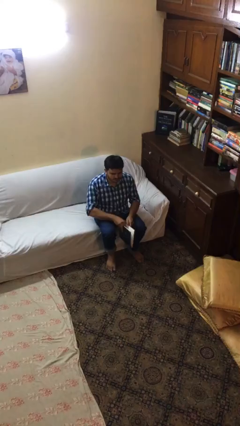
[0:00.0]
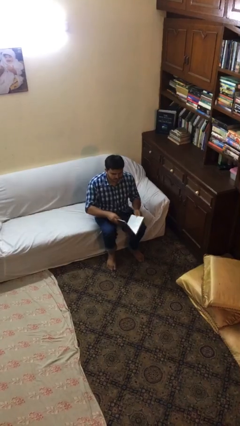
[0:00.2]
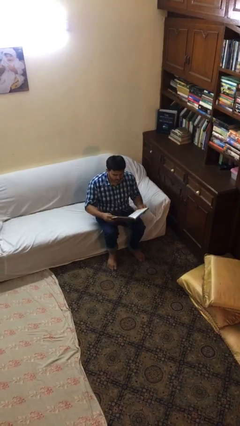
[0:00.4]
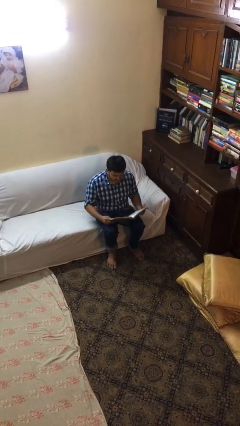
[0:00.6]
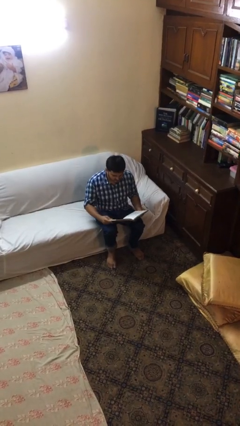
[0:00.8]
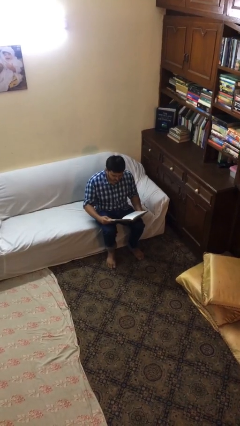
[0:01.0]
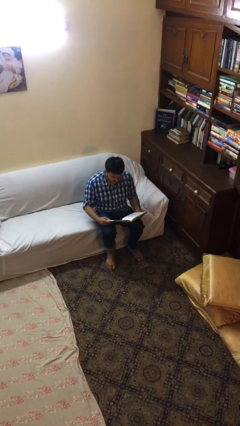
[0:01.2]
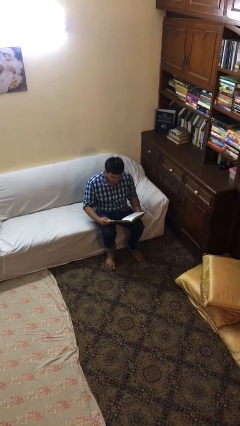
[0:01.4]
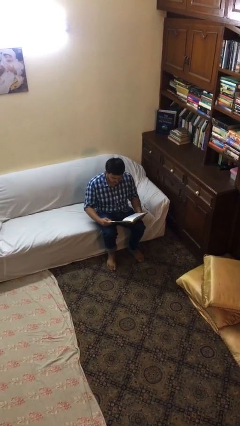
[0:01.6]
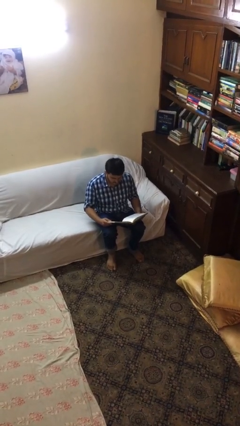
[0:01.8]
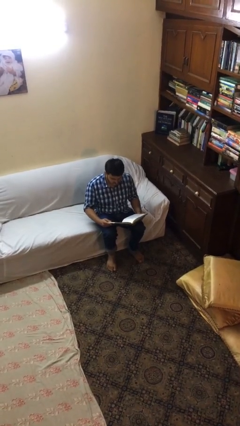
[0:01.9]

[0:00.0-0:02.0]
person reads document

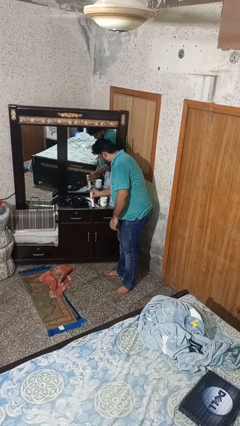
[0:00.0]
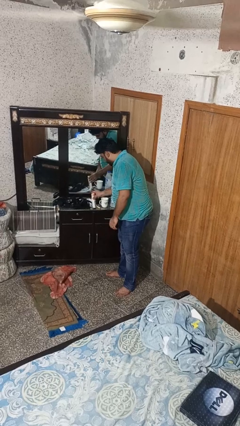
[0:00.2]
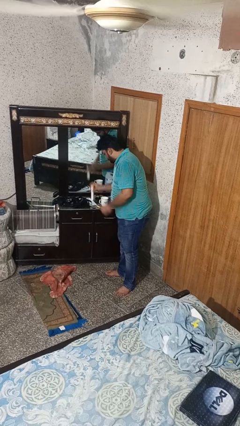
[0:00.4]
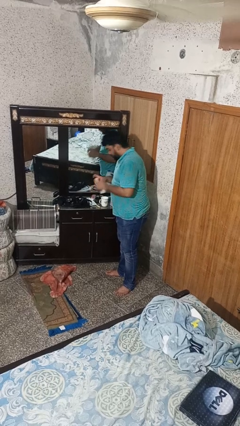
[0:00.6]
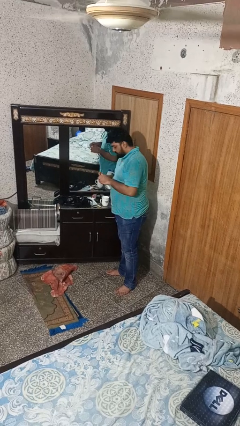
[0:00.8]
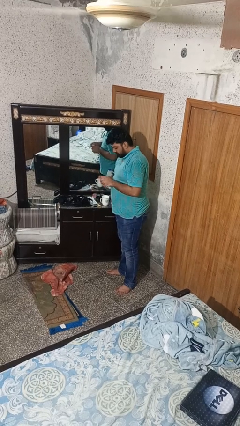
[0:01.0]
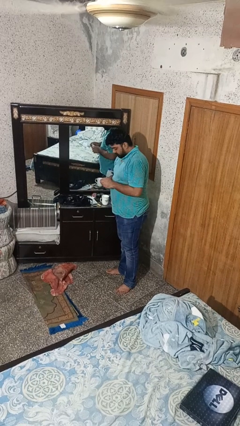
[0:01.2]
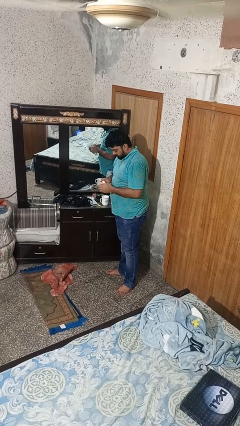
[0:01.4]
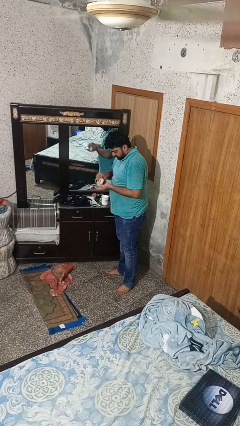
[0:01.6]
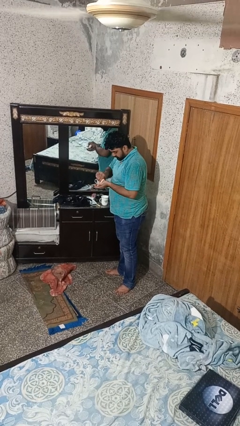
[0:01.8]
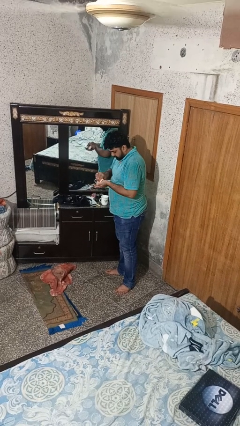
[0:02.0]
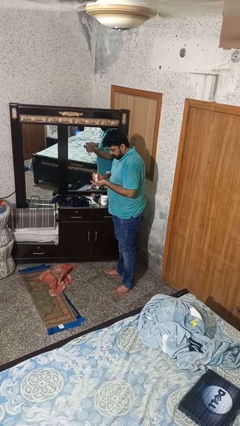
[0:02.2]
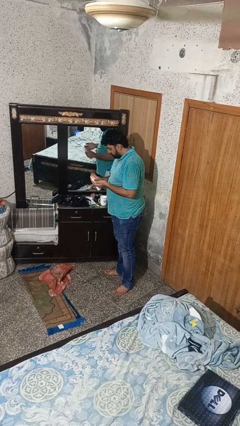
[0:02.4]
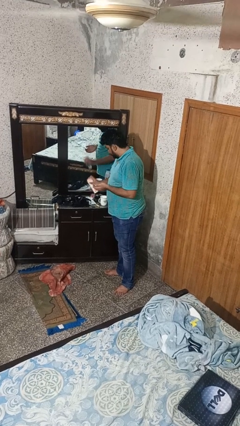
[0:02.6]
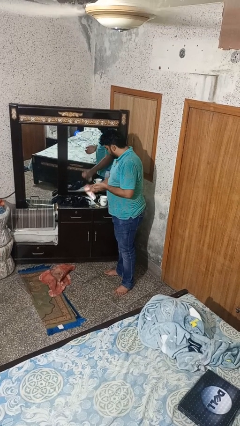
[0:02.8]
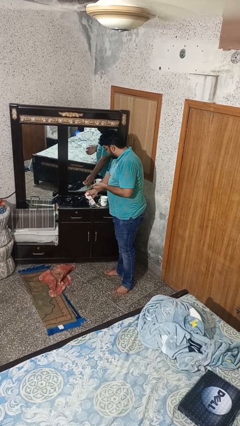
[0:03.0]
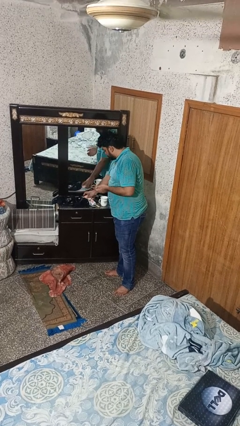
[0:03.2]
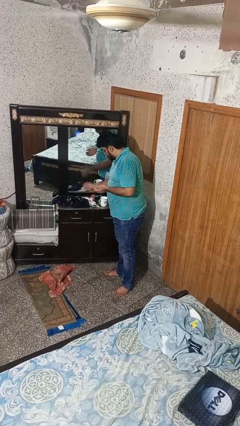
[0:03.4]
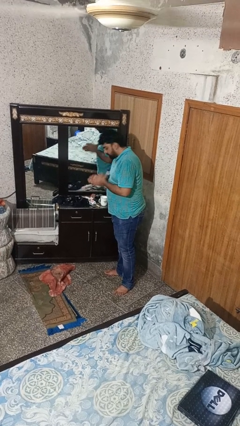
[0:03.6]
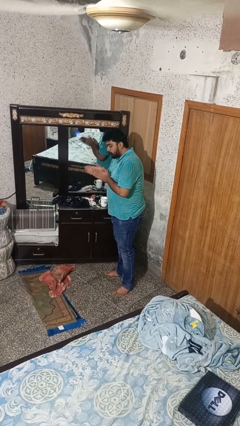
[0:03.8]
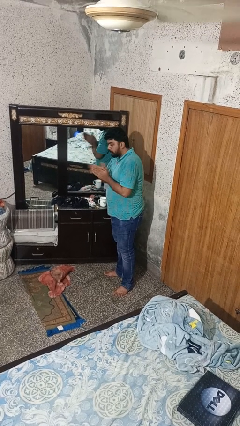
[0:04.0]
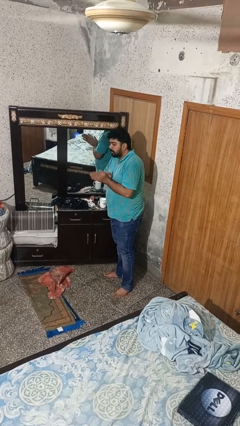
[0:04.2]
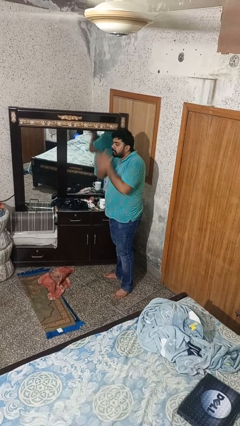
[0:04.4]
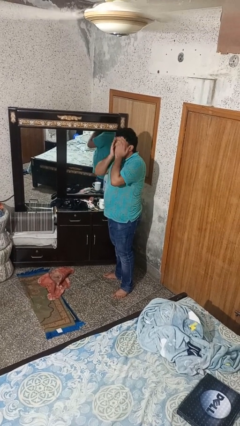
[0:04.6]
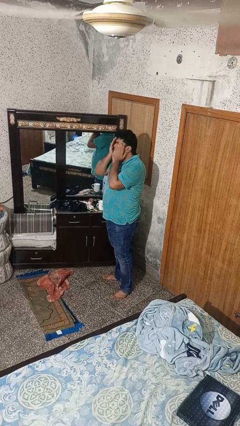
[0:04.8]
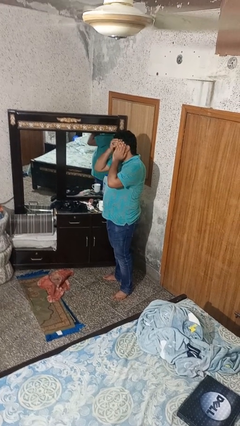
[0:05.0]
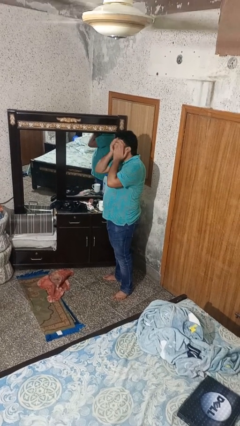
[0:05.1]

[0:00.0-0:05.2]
person applies facial moisturizer

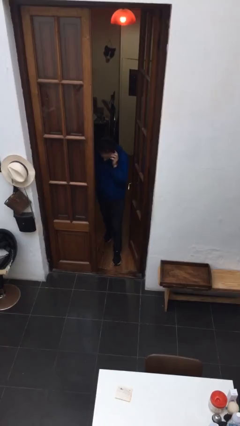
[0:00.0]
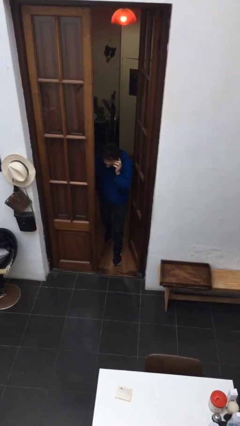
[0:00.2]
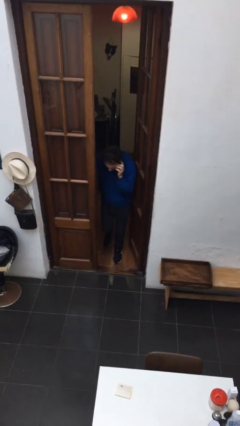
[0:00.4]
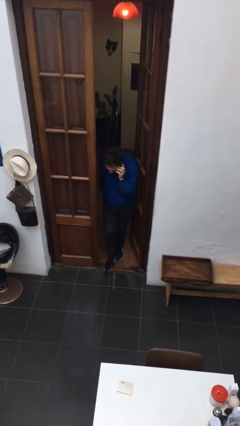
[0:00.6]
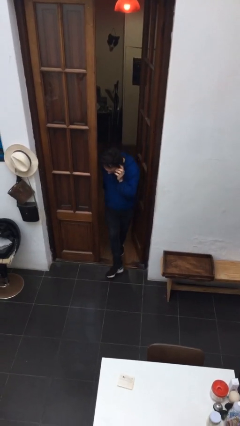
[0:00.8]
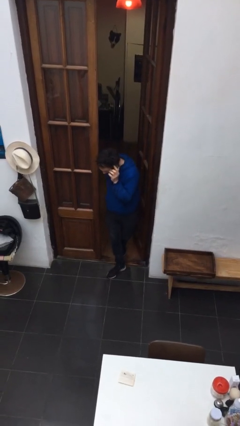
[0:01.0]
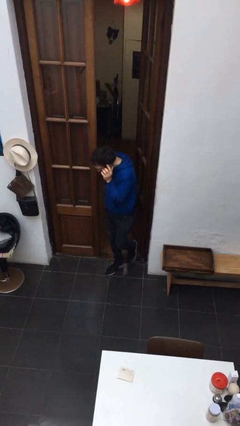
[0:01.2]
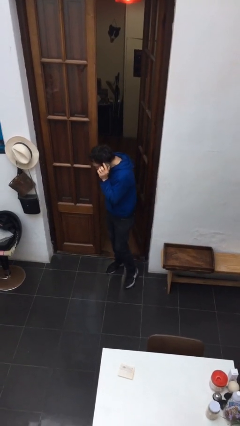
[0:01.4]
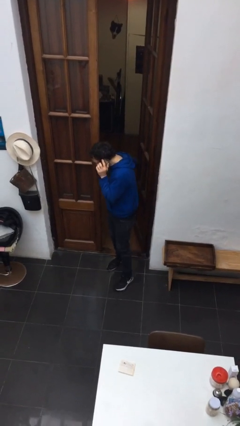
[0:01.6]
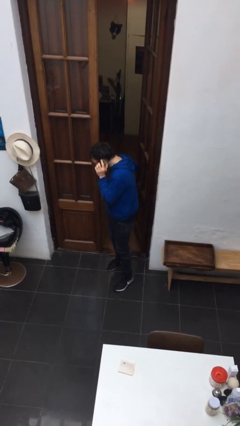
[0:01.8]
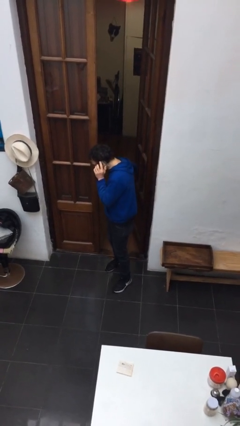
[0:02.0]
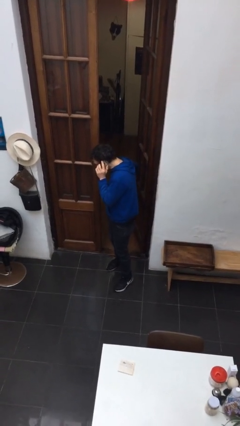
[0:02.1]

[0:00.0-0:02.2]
person enters scene through structure

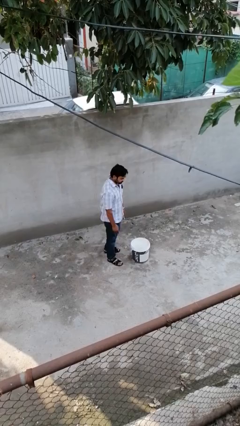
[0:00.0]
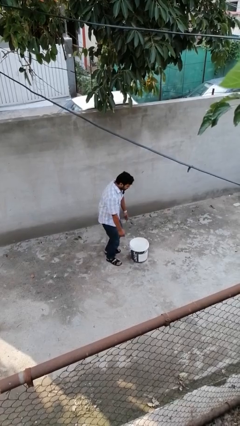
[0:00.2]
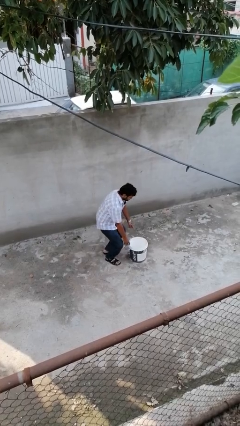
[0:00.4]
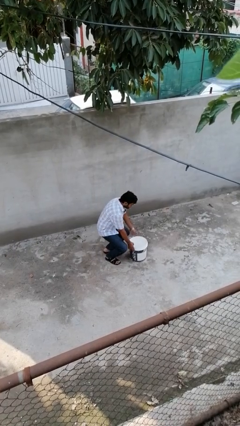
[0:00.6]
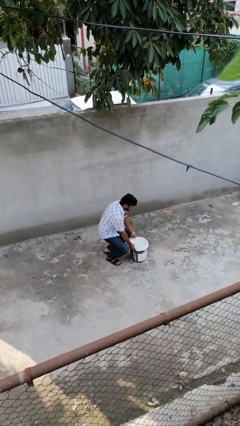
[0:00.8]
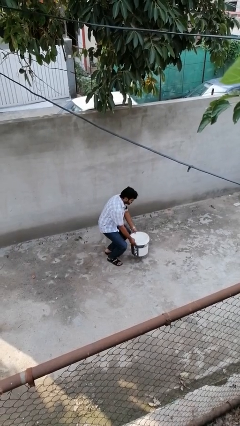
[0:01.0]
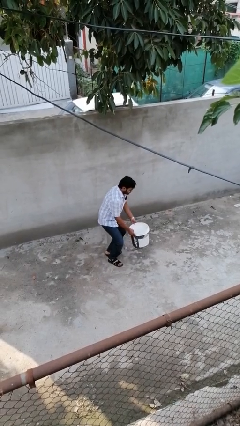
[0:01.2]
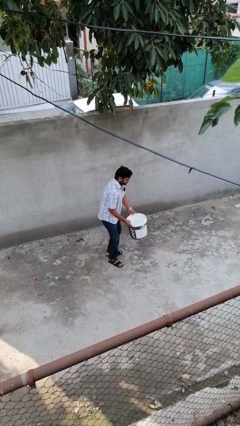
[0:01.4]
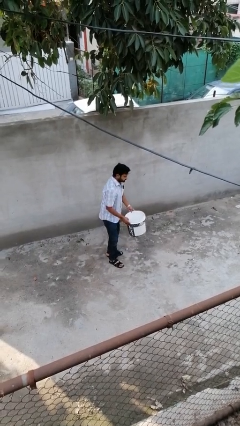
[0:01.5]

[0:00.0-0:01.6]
person picks up object from floor

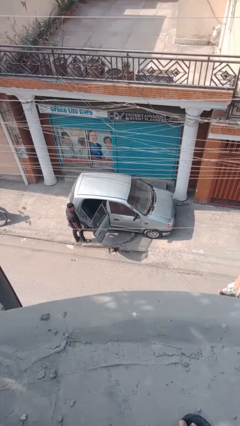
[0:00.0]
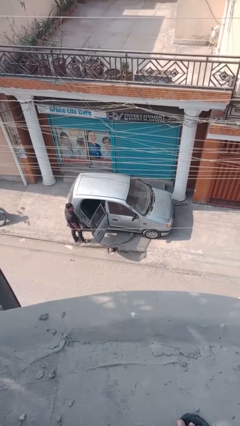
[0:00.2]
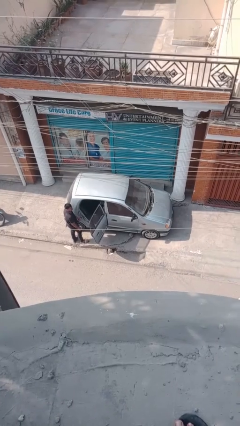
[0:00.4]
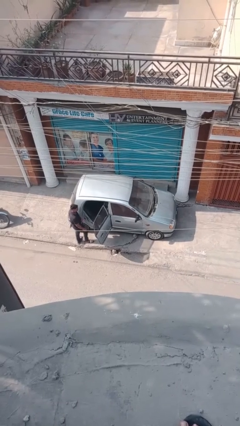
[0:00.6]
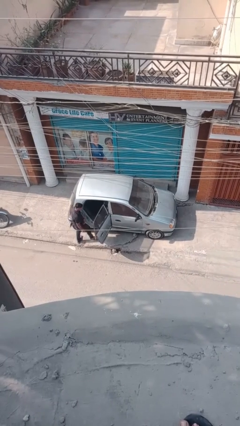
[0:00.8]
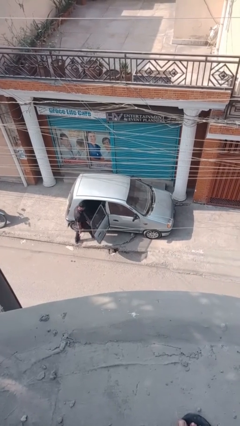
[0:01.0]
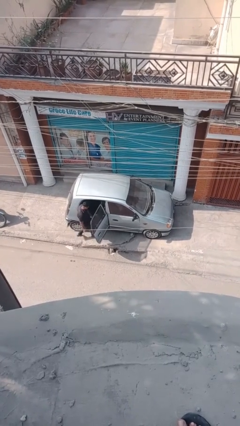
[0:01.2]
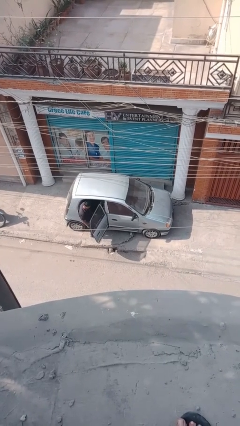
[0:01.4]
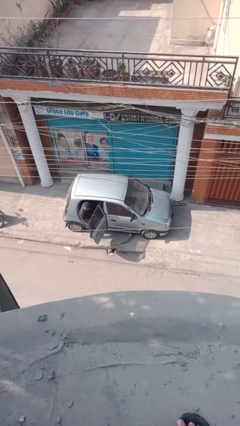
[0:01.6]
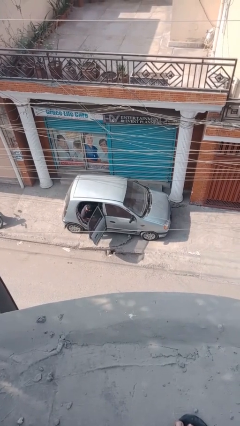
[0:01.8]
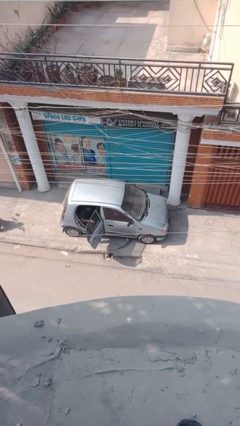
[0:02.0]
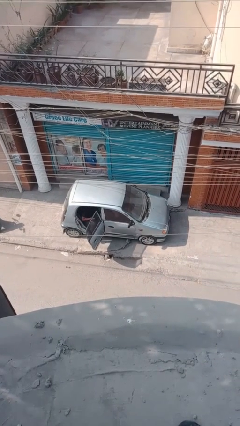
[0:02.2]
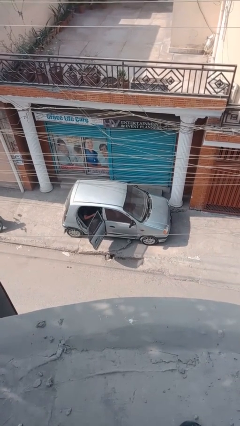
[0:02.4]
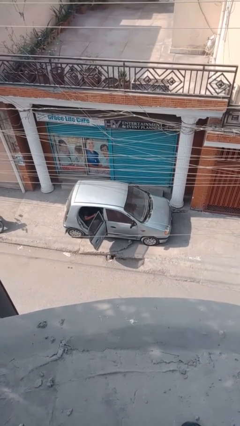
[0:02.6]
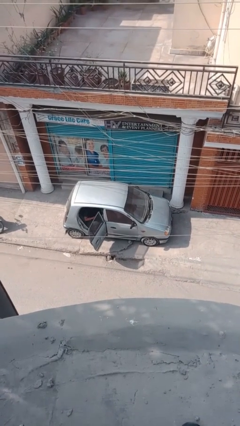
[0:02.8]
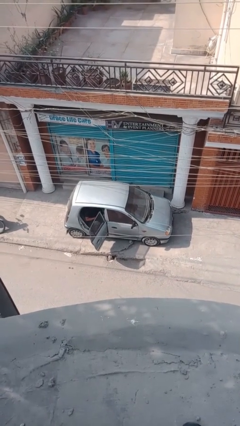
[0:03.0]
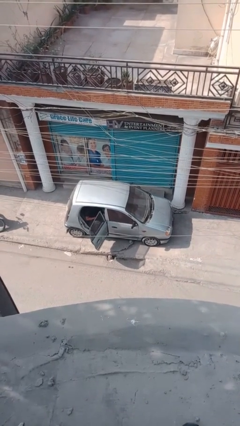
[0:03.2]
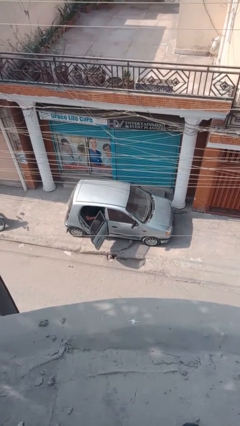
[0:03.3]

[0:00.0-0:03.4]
person enters car

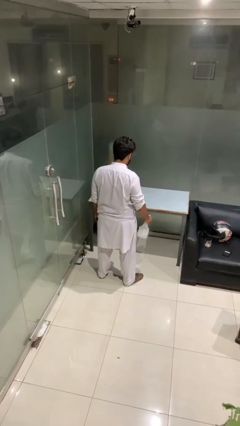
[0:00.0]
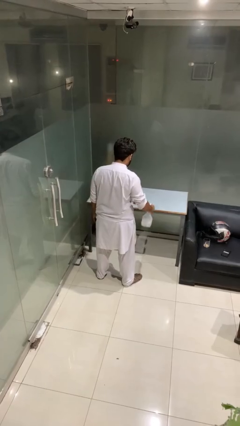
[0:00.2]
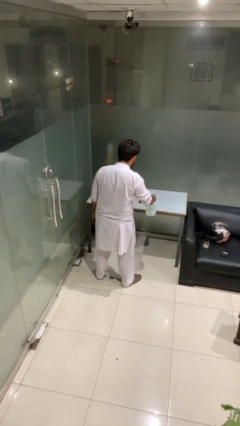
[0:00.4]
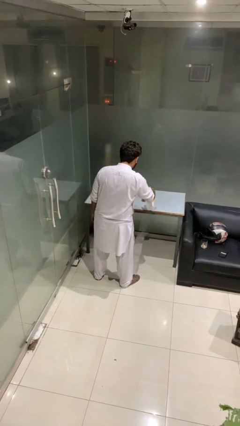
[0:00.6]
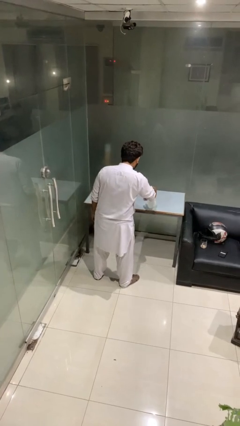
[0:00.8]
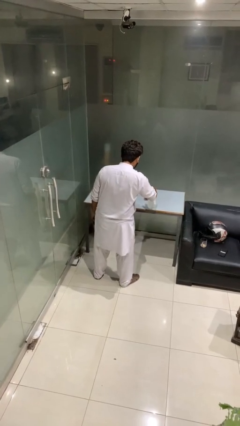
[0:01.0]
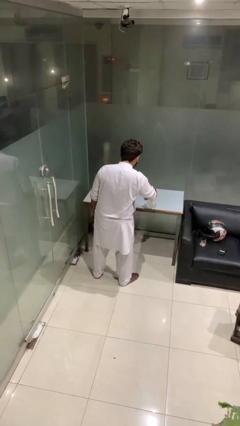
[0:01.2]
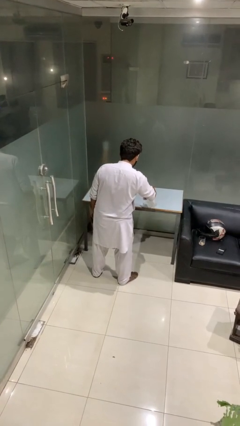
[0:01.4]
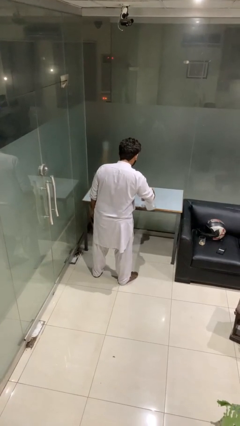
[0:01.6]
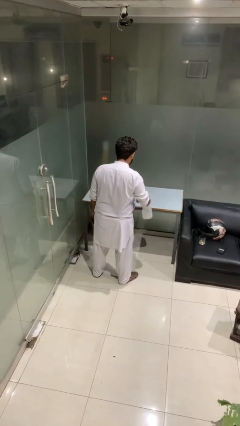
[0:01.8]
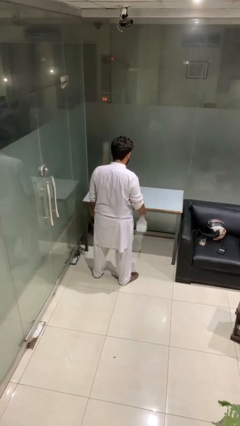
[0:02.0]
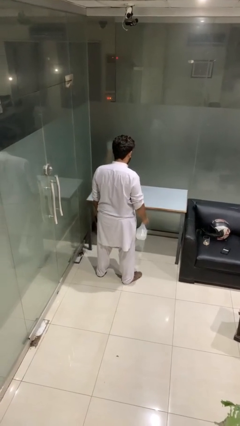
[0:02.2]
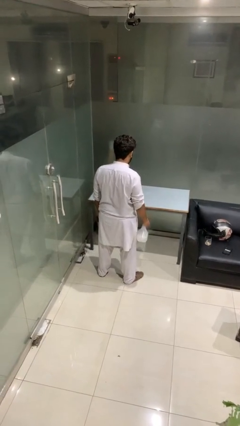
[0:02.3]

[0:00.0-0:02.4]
person sprays from bottle

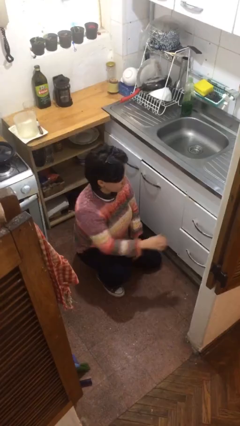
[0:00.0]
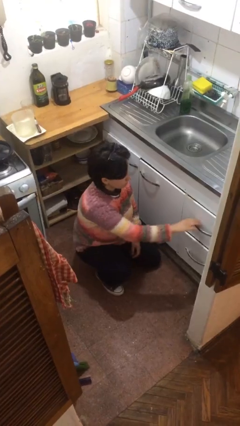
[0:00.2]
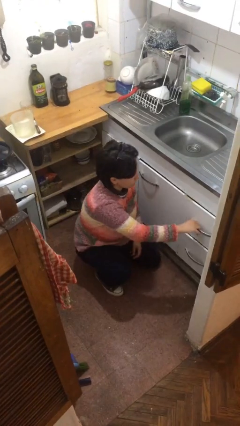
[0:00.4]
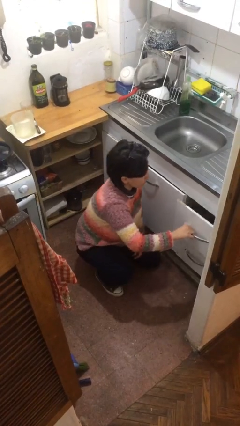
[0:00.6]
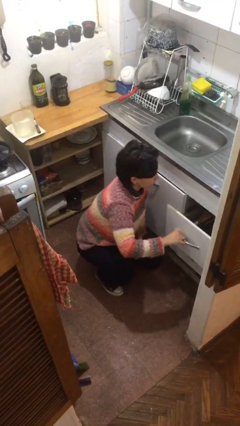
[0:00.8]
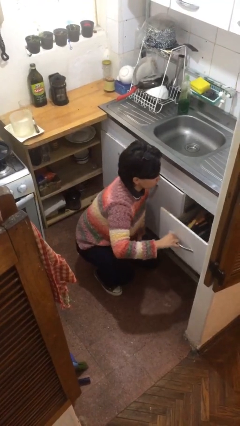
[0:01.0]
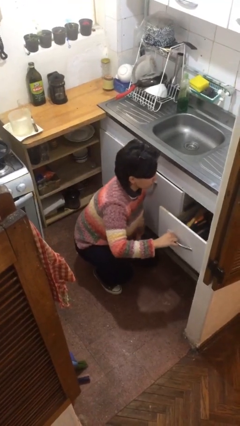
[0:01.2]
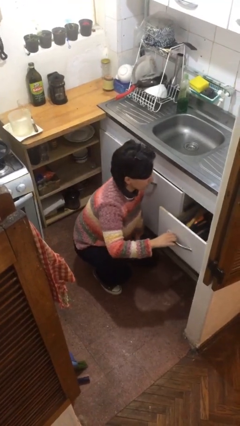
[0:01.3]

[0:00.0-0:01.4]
person opens kitchen drawer
